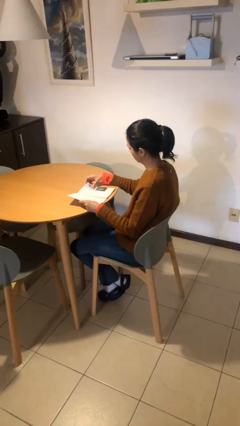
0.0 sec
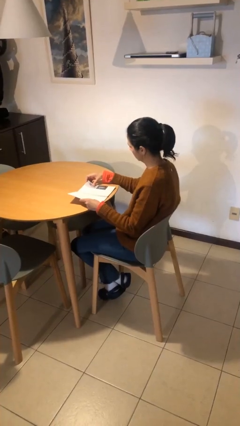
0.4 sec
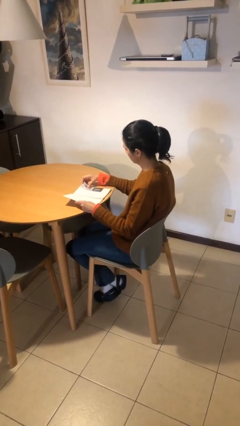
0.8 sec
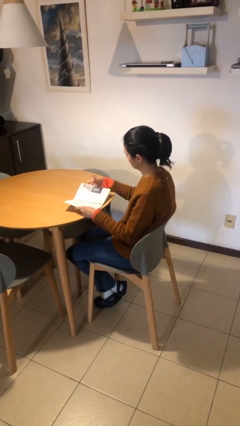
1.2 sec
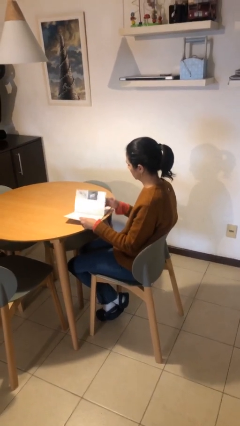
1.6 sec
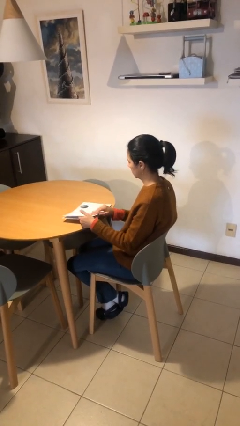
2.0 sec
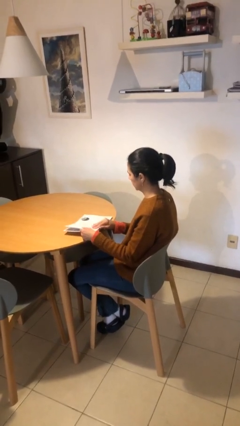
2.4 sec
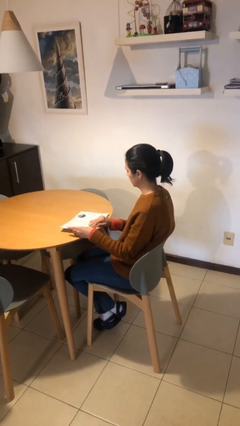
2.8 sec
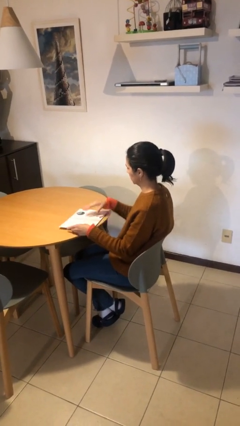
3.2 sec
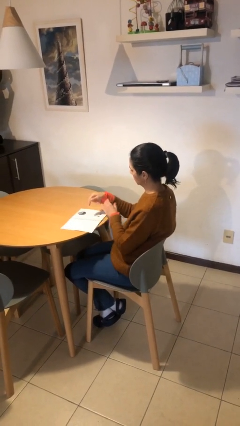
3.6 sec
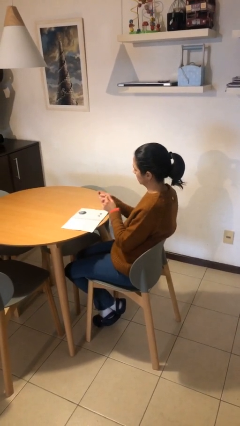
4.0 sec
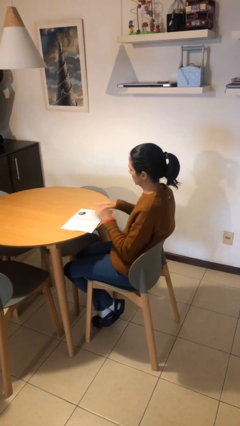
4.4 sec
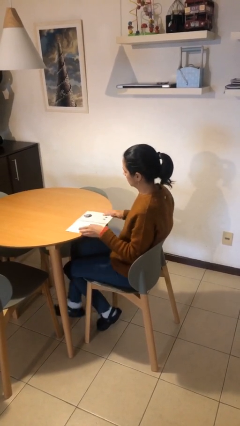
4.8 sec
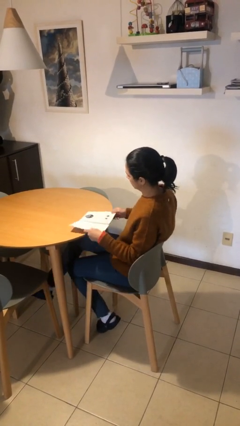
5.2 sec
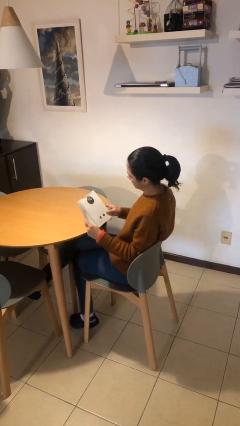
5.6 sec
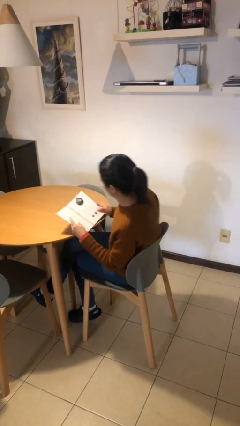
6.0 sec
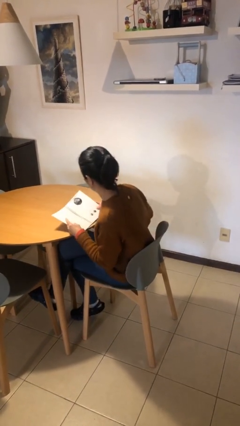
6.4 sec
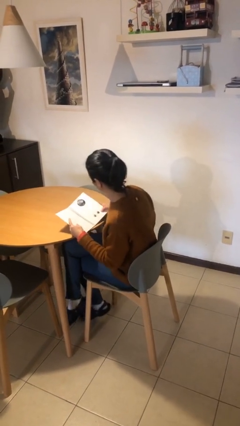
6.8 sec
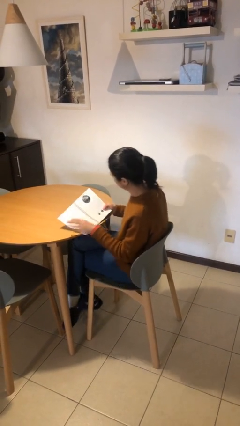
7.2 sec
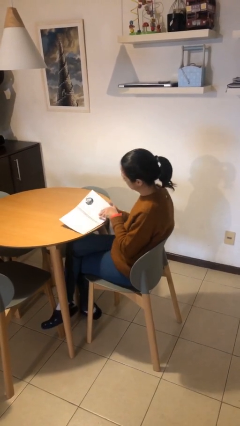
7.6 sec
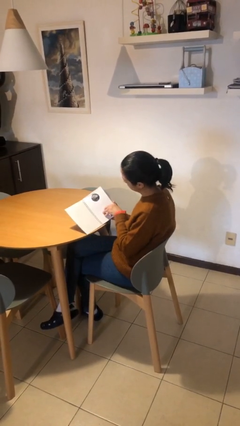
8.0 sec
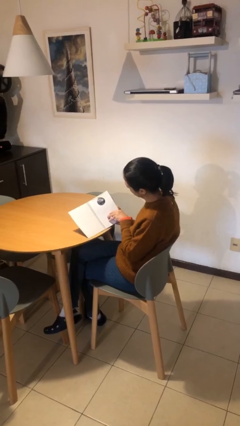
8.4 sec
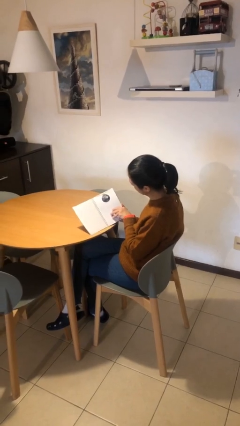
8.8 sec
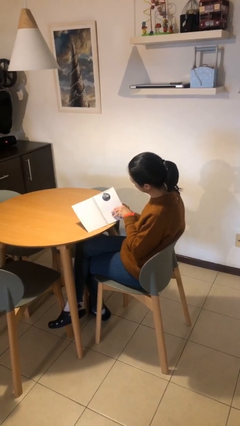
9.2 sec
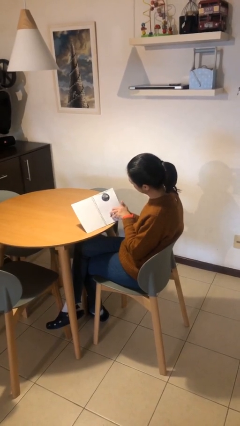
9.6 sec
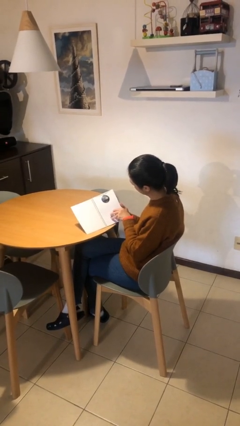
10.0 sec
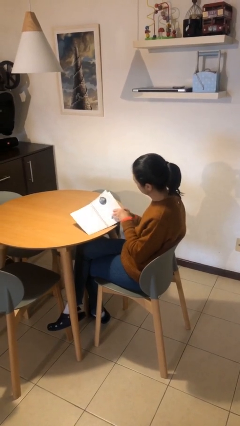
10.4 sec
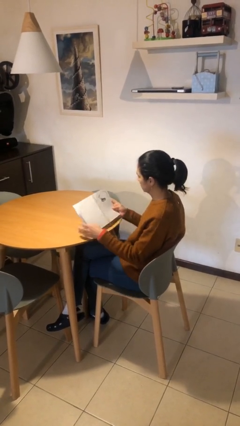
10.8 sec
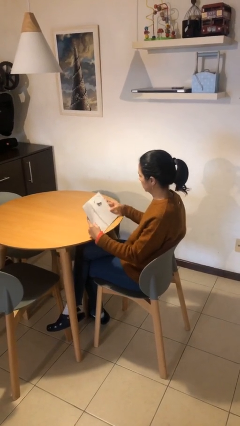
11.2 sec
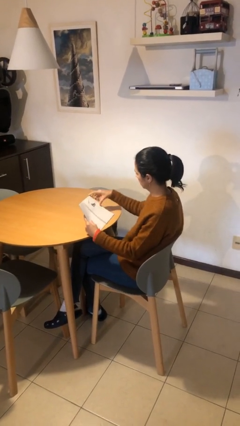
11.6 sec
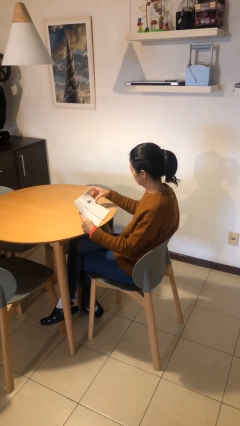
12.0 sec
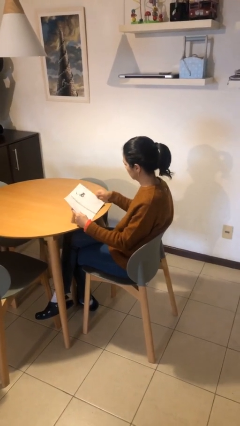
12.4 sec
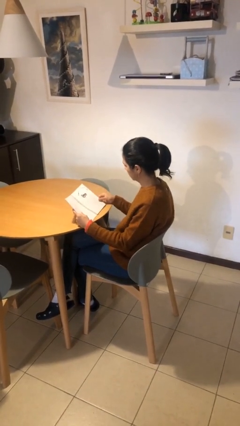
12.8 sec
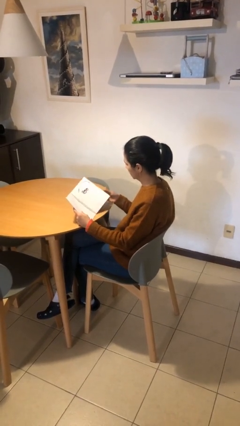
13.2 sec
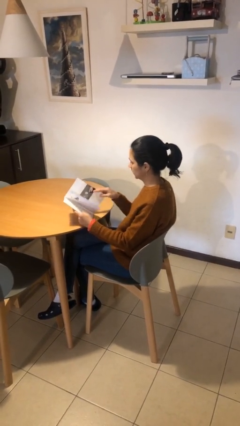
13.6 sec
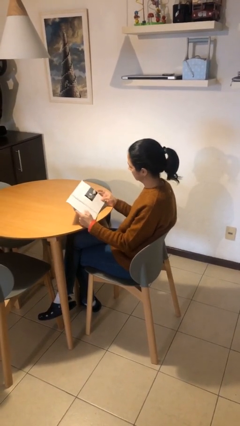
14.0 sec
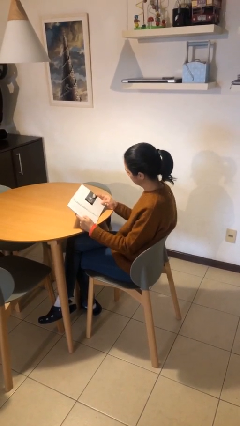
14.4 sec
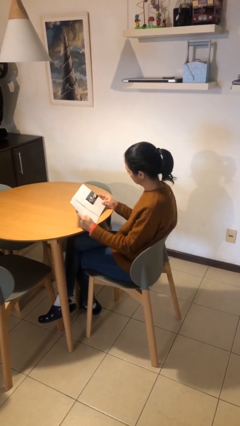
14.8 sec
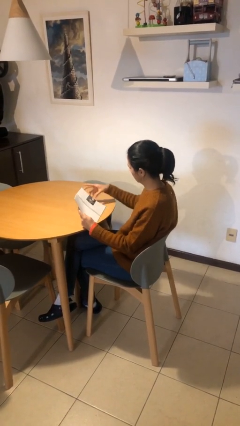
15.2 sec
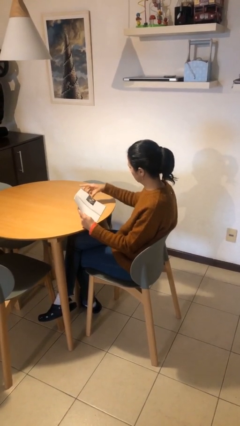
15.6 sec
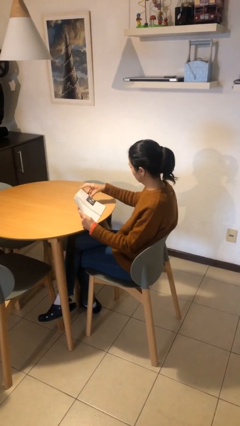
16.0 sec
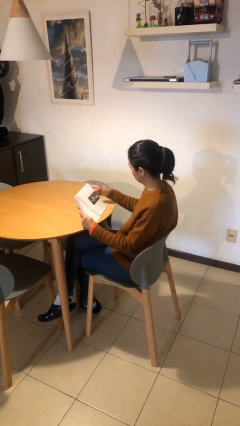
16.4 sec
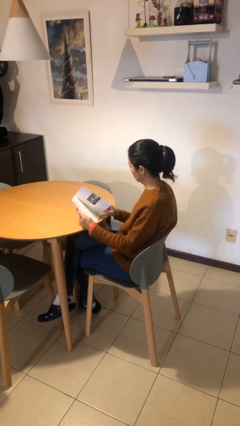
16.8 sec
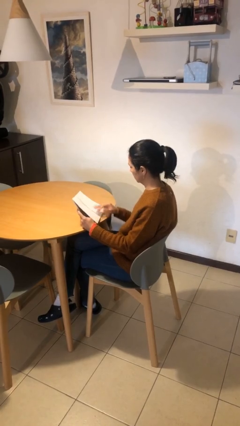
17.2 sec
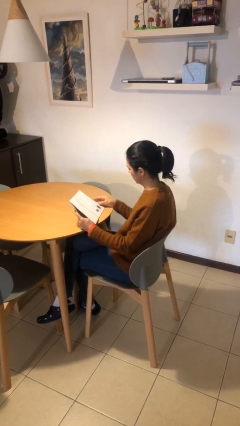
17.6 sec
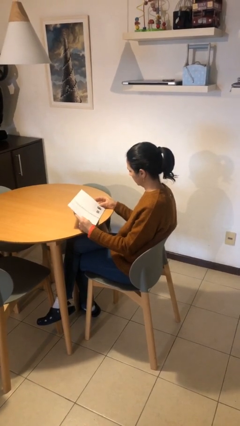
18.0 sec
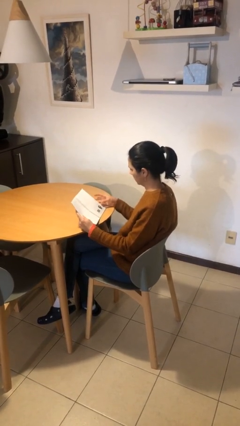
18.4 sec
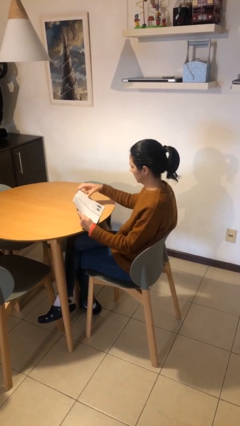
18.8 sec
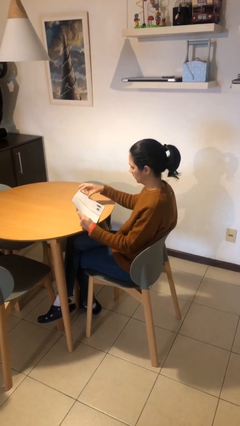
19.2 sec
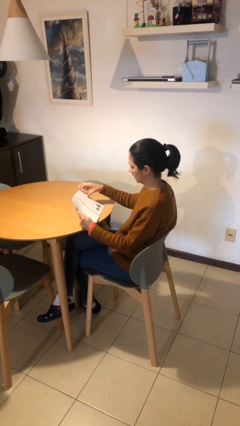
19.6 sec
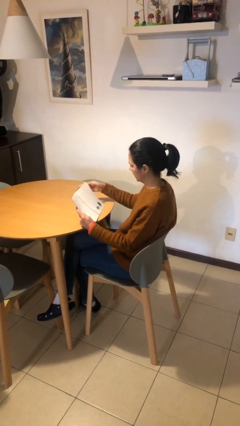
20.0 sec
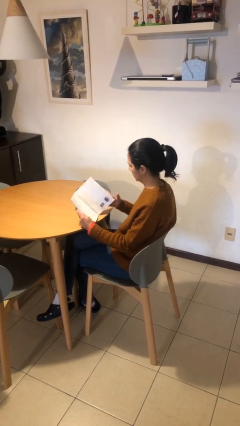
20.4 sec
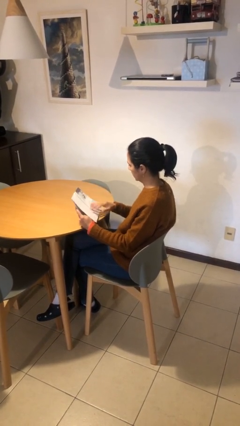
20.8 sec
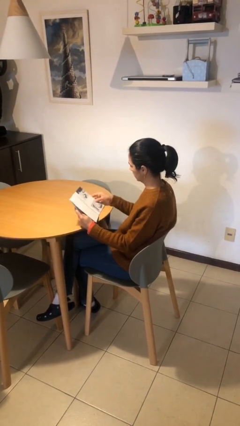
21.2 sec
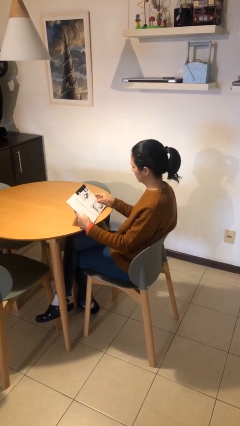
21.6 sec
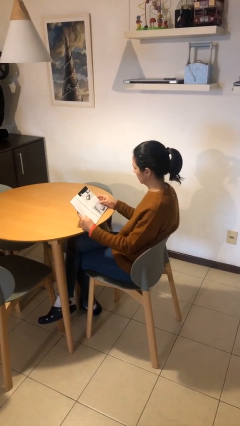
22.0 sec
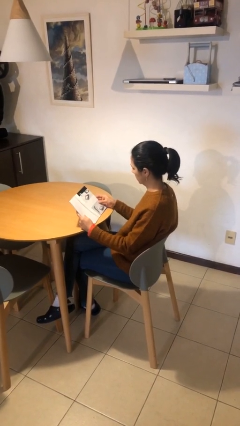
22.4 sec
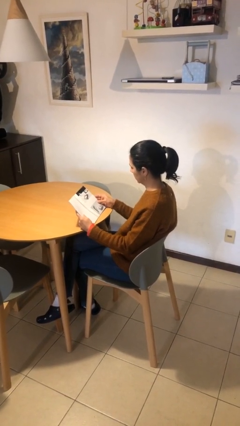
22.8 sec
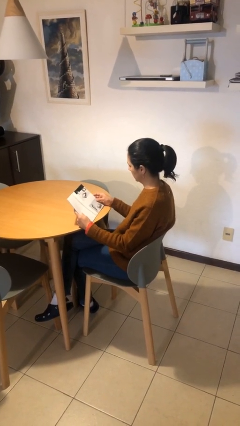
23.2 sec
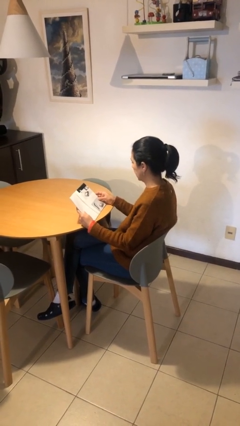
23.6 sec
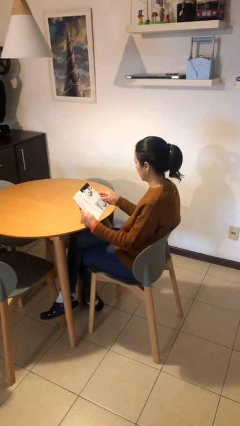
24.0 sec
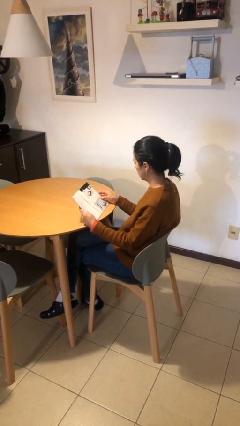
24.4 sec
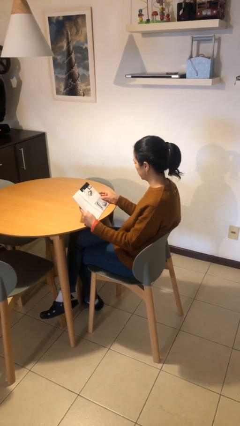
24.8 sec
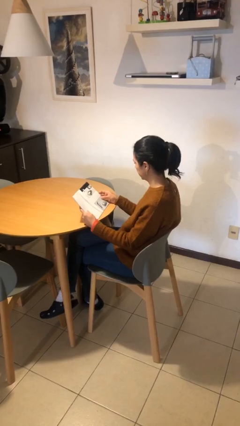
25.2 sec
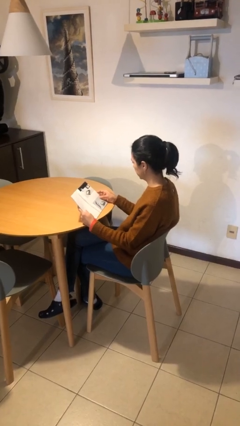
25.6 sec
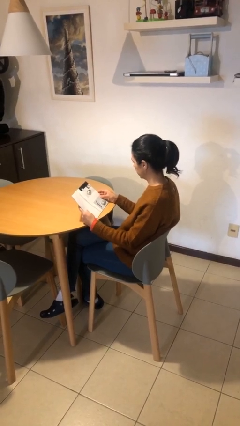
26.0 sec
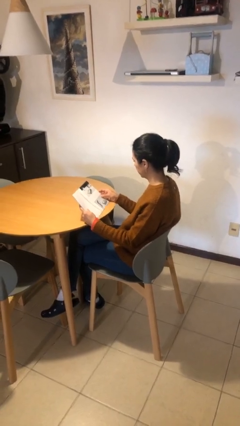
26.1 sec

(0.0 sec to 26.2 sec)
person reads document

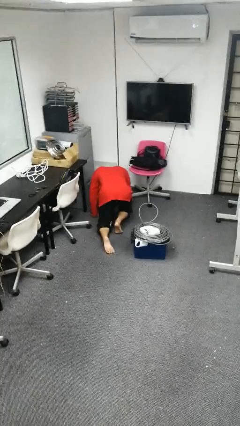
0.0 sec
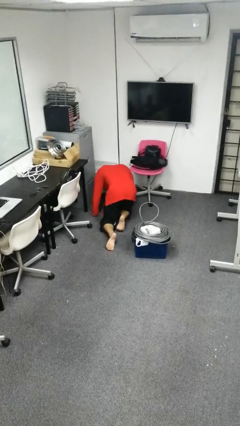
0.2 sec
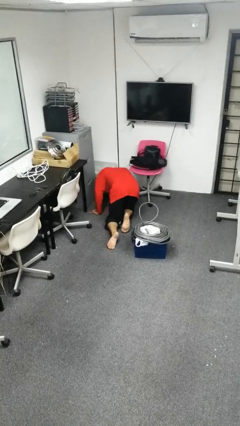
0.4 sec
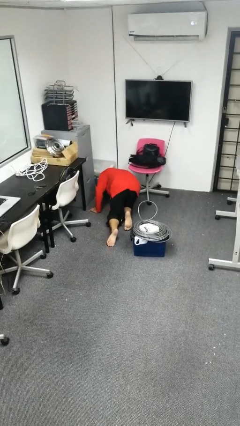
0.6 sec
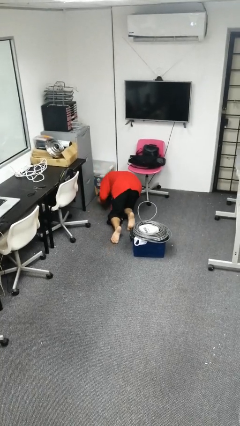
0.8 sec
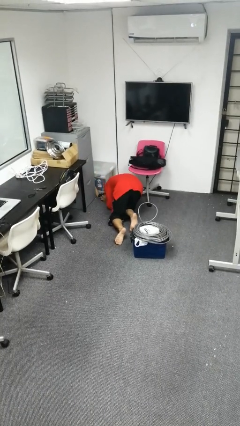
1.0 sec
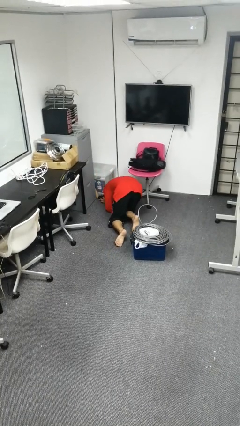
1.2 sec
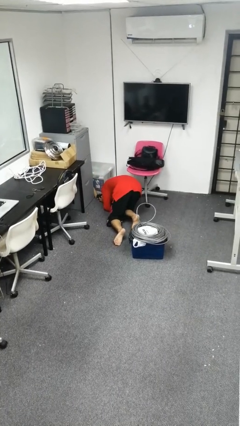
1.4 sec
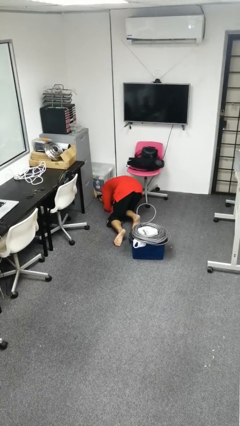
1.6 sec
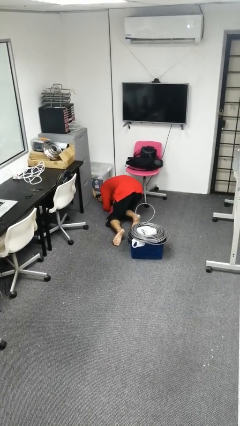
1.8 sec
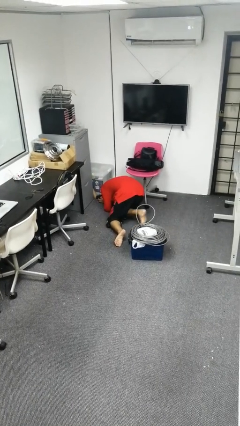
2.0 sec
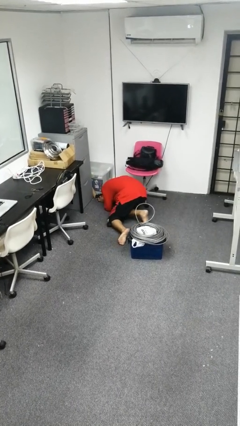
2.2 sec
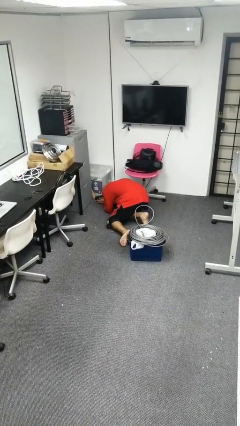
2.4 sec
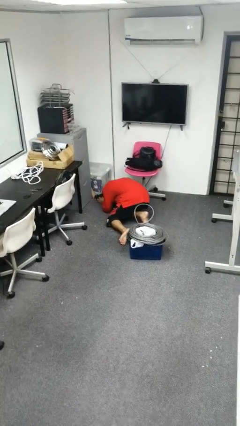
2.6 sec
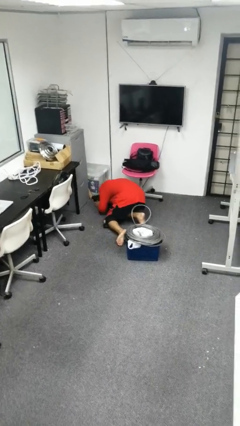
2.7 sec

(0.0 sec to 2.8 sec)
person lies down on floor

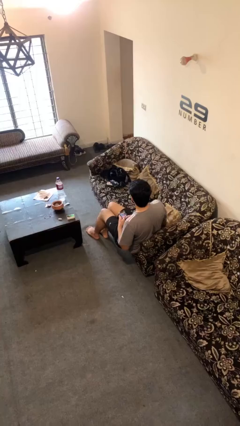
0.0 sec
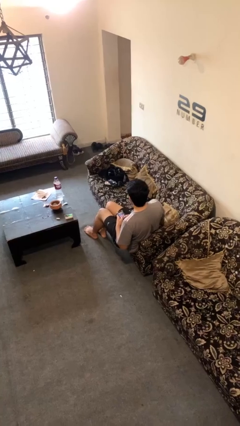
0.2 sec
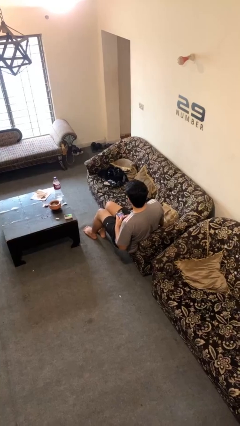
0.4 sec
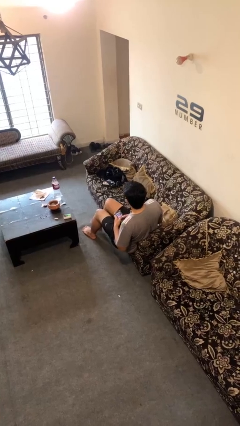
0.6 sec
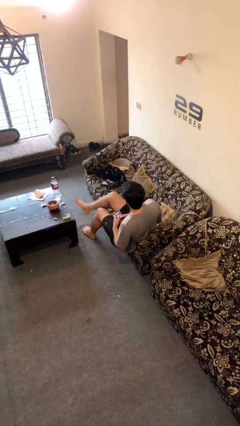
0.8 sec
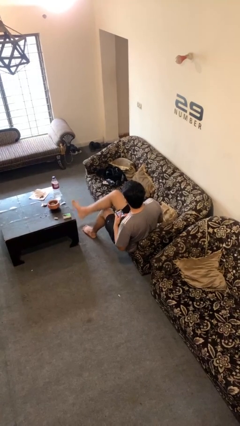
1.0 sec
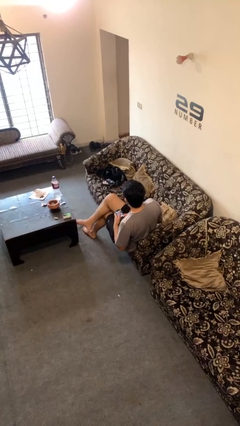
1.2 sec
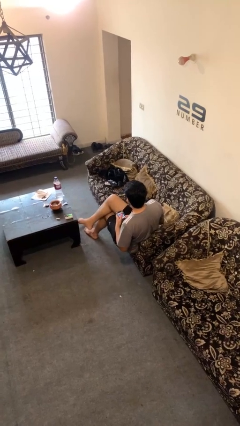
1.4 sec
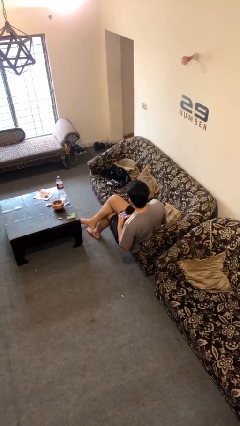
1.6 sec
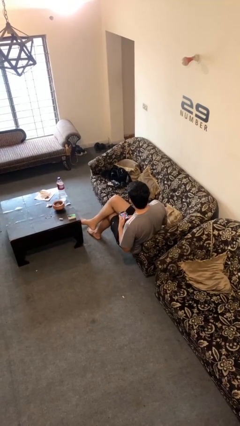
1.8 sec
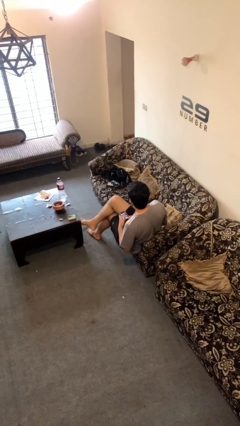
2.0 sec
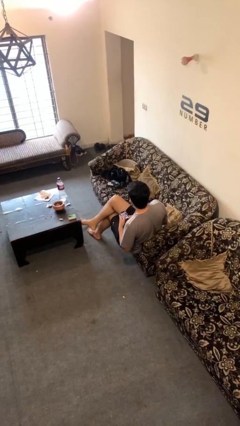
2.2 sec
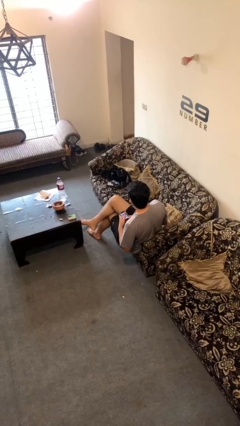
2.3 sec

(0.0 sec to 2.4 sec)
person crosses legs
